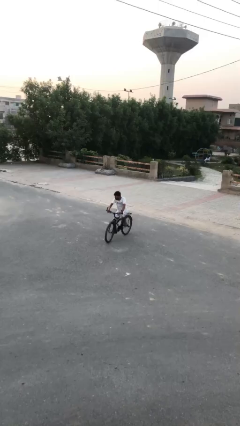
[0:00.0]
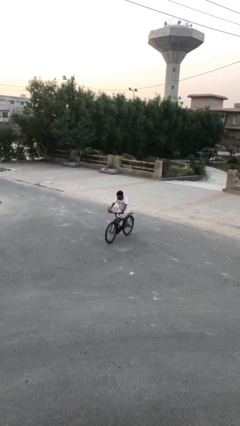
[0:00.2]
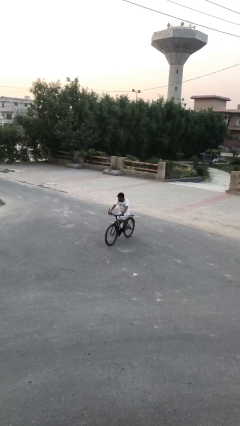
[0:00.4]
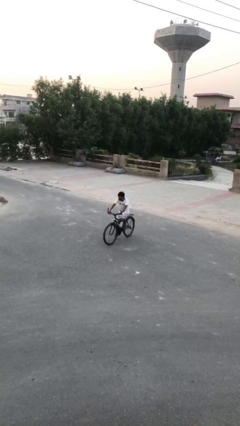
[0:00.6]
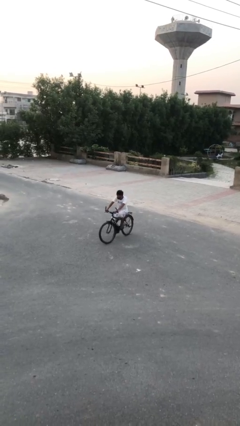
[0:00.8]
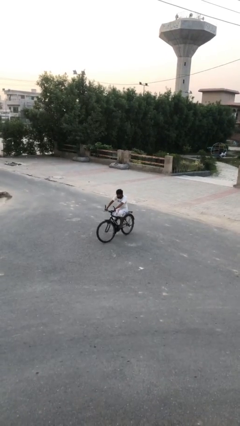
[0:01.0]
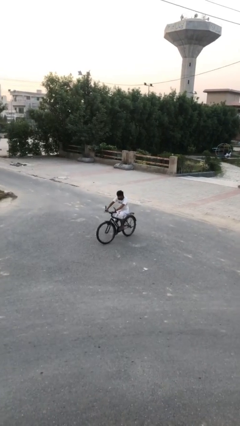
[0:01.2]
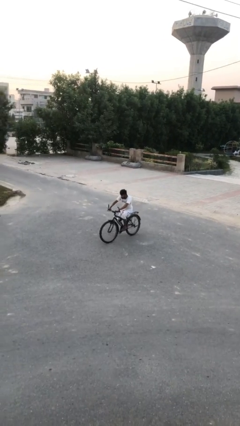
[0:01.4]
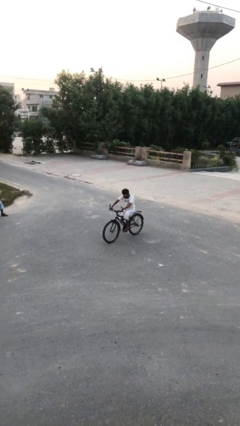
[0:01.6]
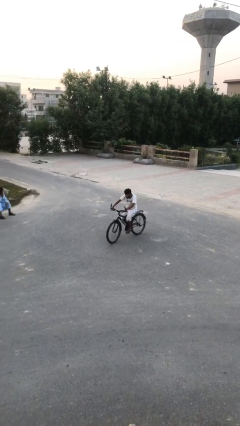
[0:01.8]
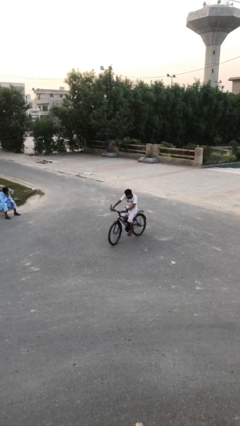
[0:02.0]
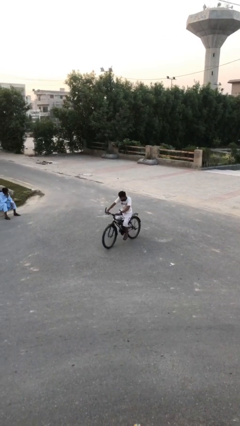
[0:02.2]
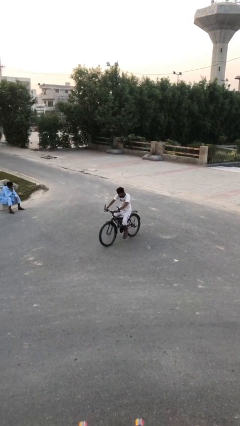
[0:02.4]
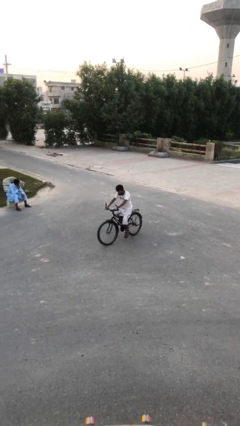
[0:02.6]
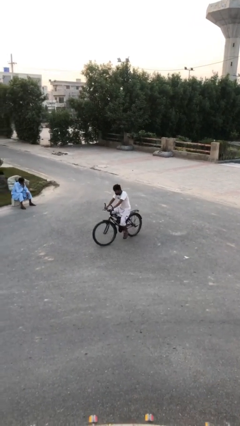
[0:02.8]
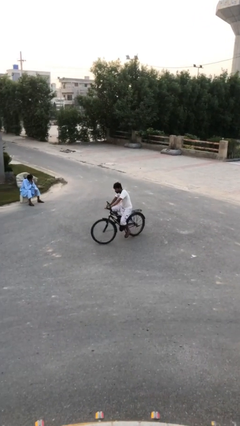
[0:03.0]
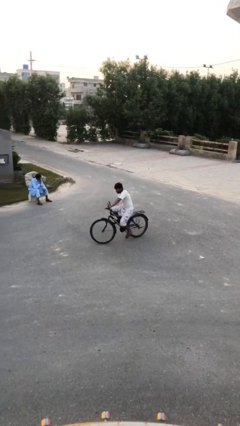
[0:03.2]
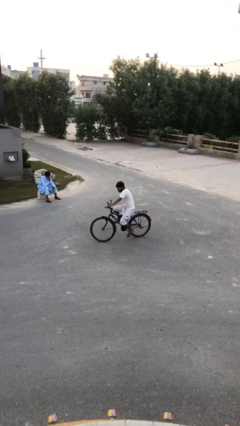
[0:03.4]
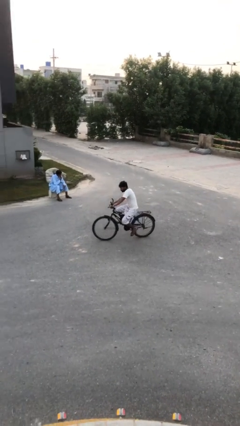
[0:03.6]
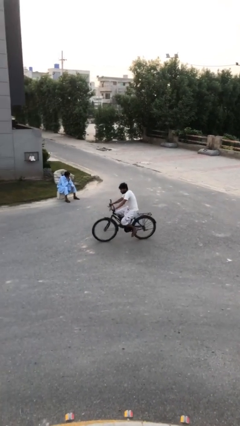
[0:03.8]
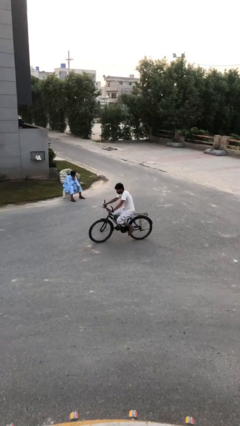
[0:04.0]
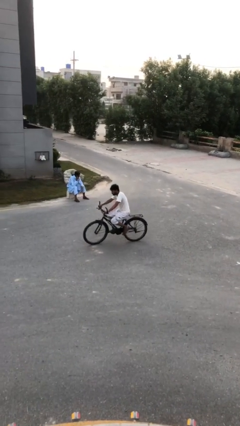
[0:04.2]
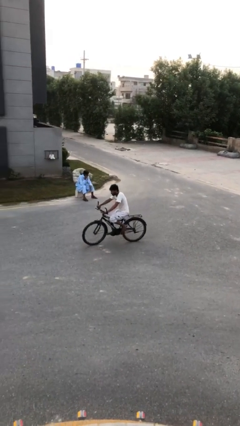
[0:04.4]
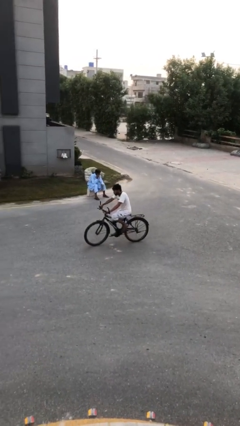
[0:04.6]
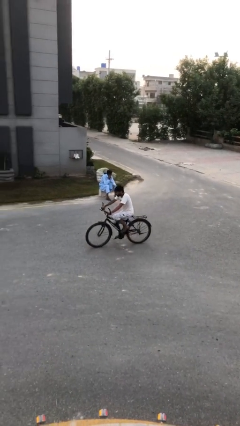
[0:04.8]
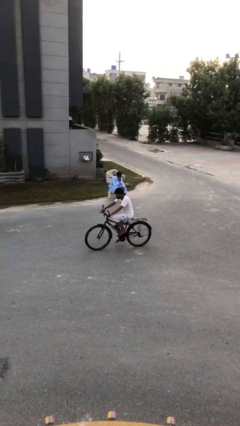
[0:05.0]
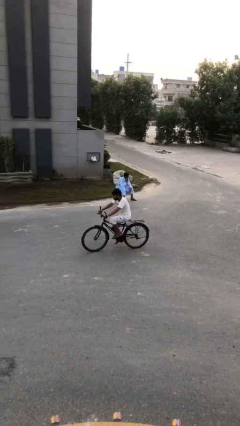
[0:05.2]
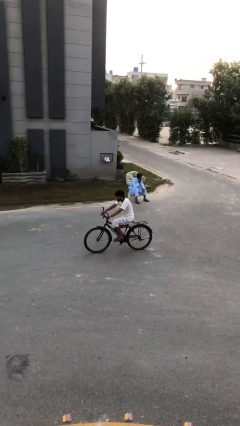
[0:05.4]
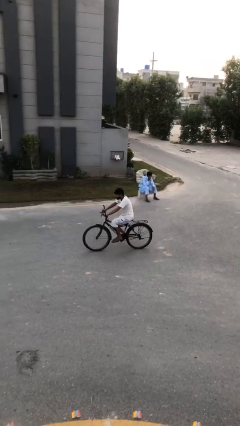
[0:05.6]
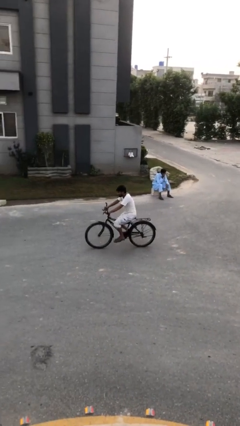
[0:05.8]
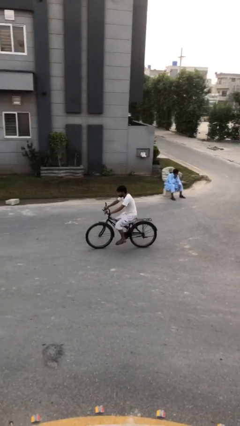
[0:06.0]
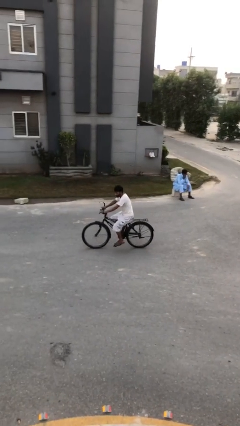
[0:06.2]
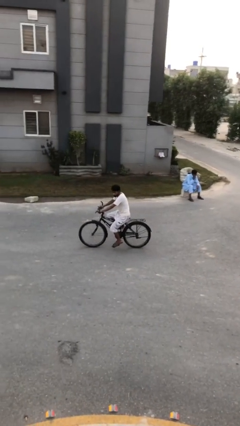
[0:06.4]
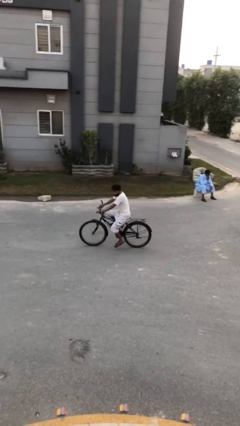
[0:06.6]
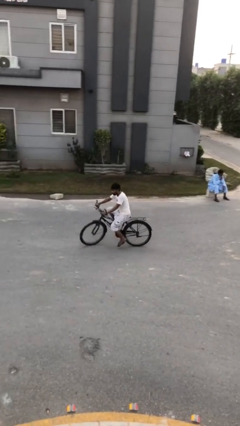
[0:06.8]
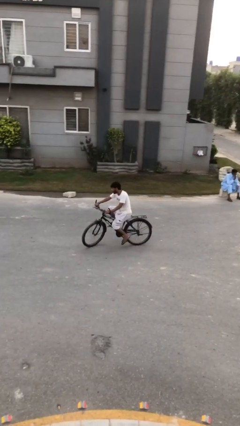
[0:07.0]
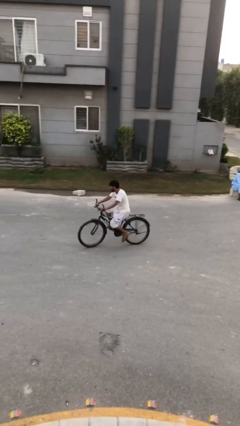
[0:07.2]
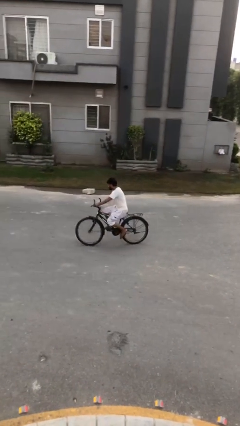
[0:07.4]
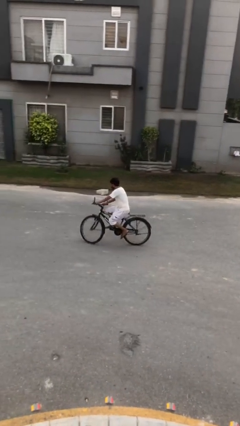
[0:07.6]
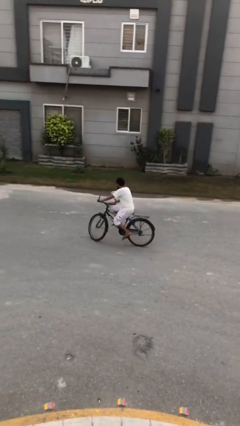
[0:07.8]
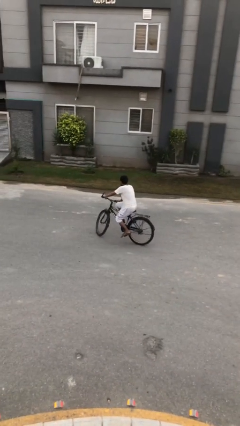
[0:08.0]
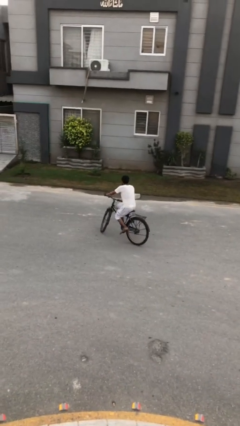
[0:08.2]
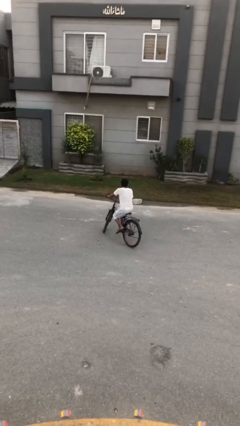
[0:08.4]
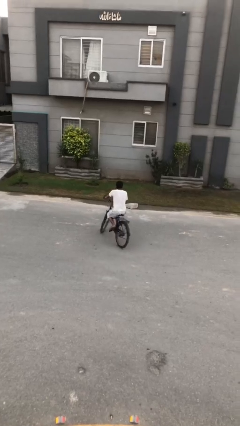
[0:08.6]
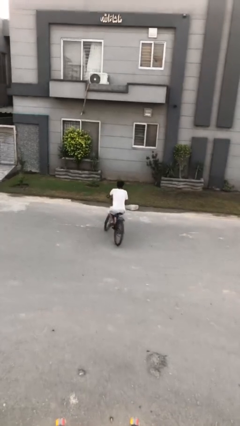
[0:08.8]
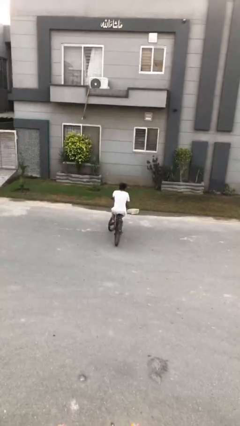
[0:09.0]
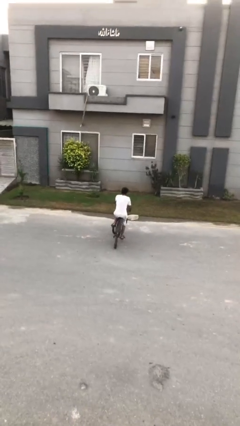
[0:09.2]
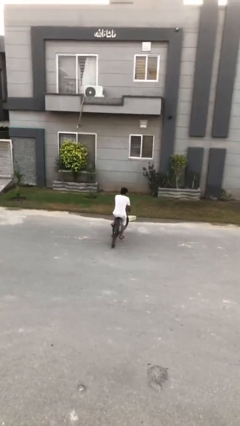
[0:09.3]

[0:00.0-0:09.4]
person rides bicycle

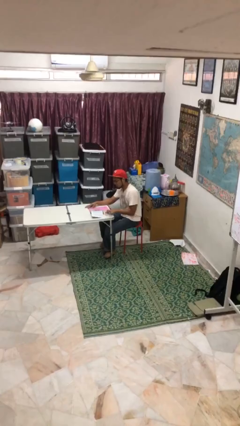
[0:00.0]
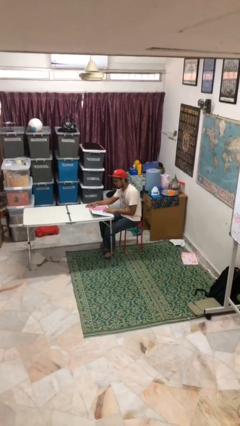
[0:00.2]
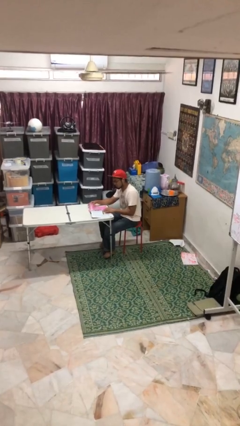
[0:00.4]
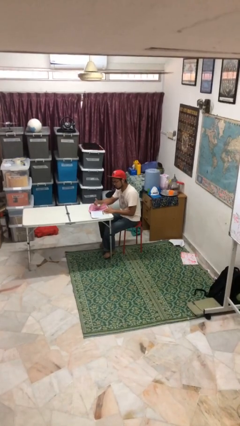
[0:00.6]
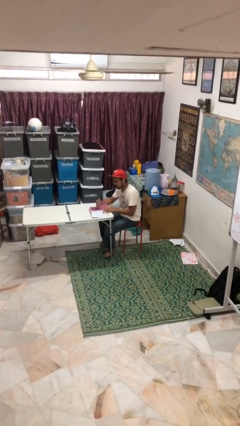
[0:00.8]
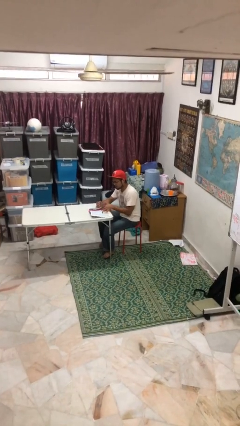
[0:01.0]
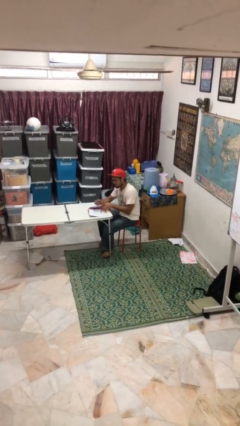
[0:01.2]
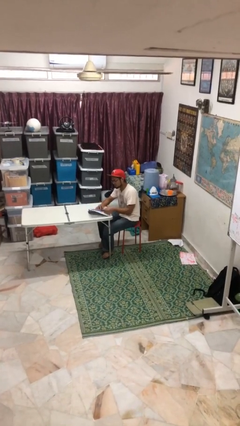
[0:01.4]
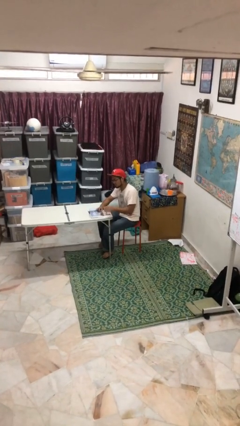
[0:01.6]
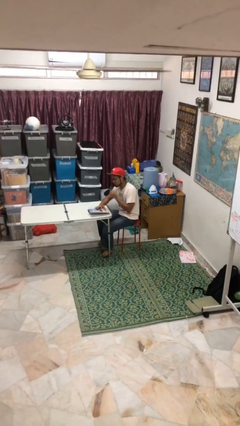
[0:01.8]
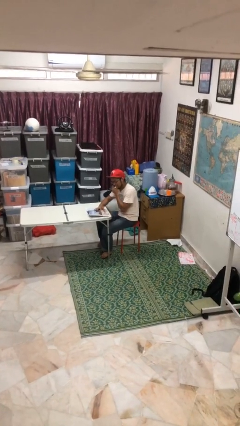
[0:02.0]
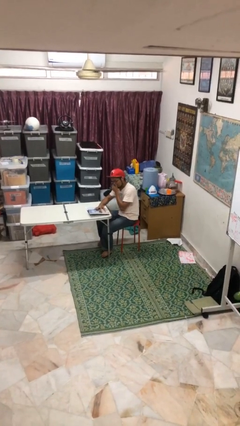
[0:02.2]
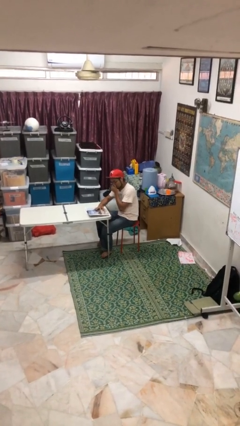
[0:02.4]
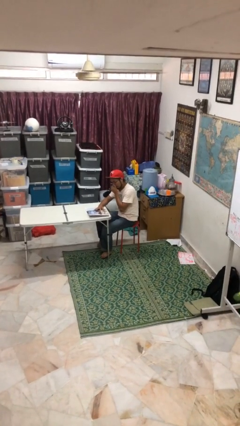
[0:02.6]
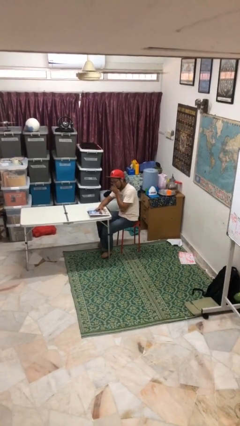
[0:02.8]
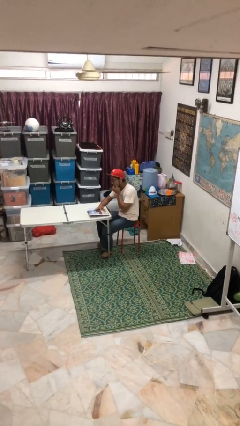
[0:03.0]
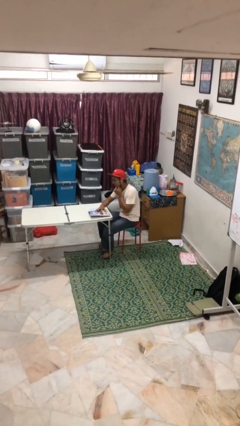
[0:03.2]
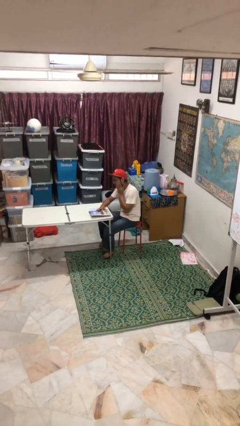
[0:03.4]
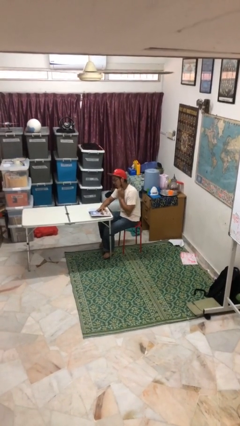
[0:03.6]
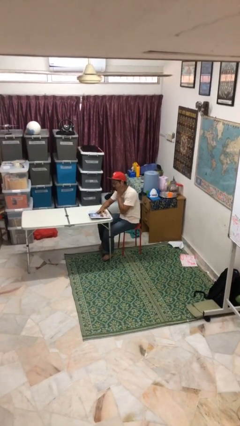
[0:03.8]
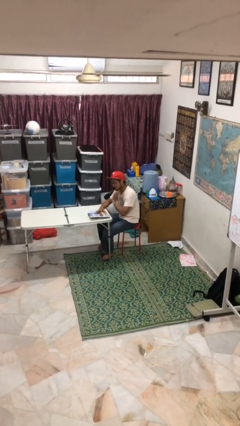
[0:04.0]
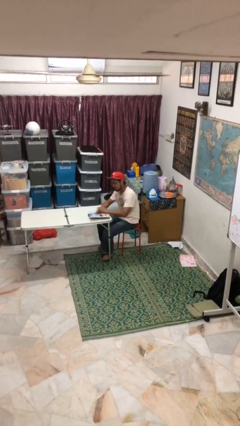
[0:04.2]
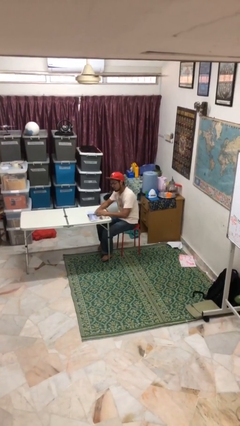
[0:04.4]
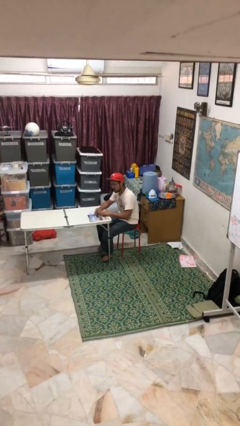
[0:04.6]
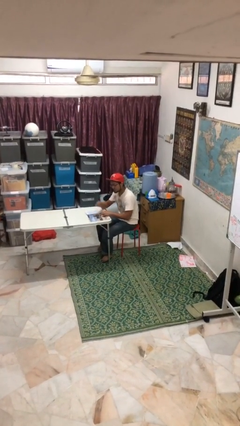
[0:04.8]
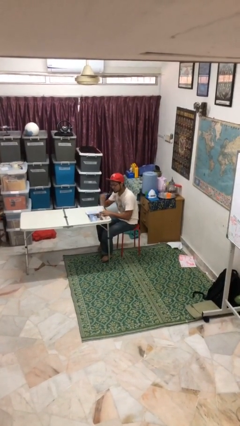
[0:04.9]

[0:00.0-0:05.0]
person reads document

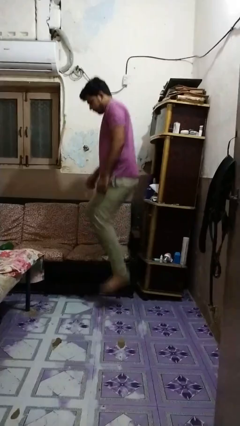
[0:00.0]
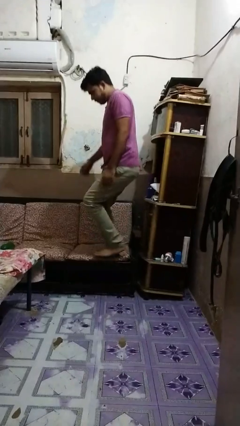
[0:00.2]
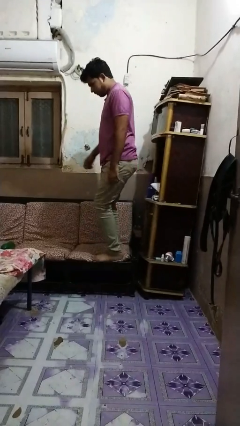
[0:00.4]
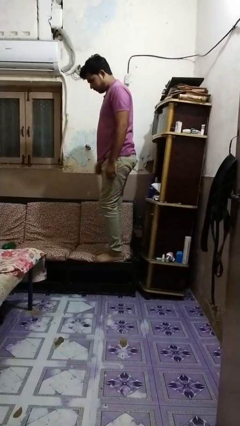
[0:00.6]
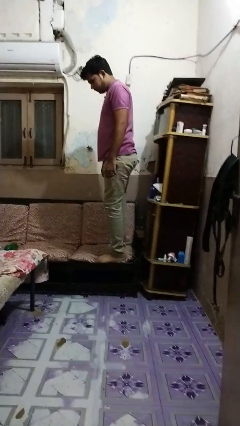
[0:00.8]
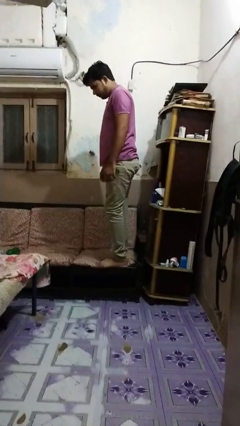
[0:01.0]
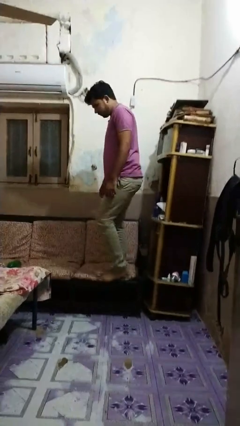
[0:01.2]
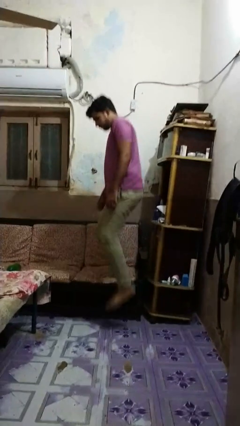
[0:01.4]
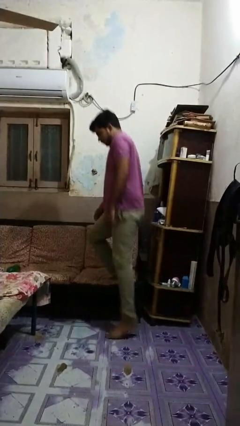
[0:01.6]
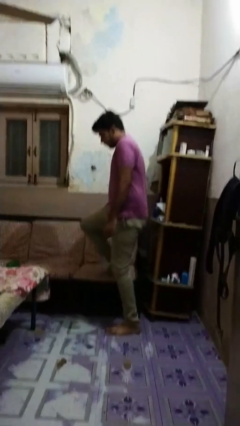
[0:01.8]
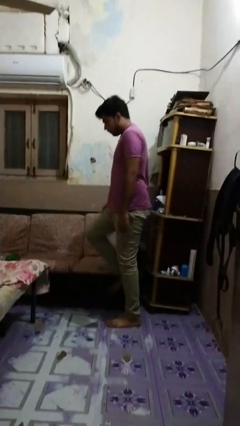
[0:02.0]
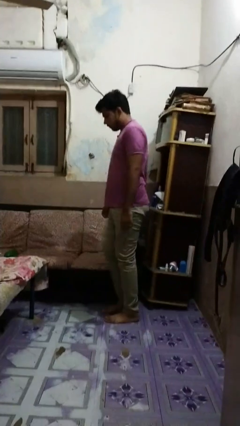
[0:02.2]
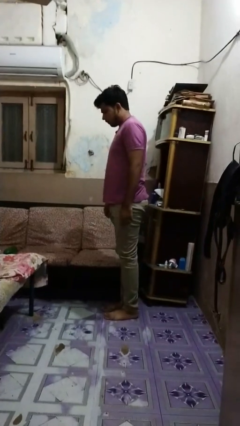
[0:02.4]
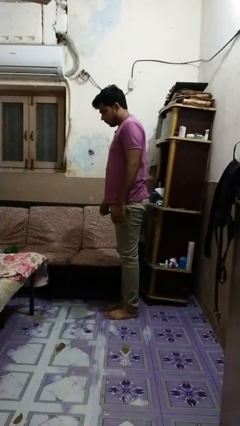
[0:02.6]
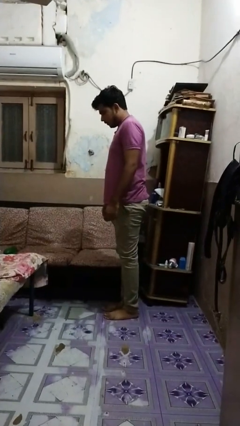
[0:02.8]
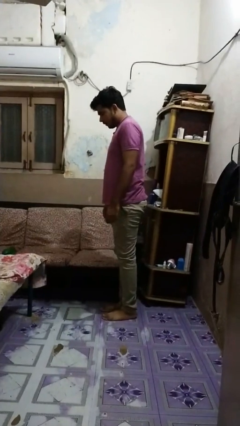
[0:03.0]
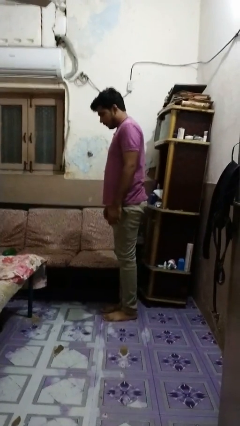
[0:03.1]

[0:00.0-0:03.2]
person climbs on couch

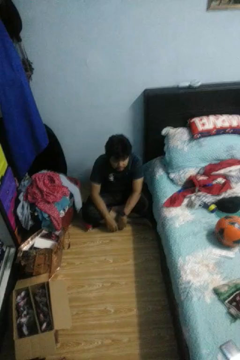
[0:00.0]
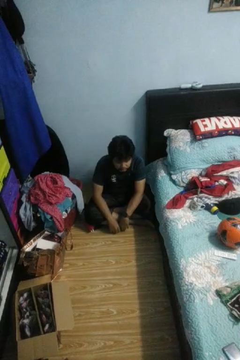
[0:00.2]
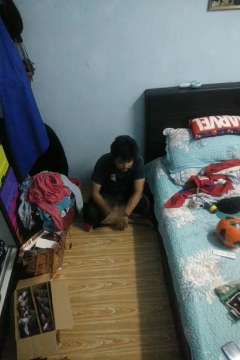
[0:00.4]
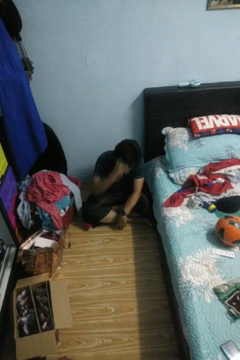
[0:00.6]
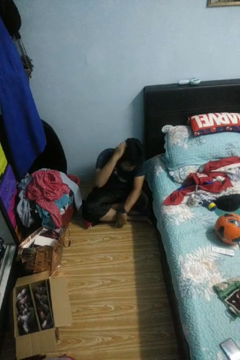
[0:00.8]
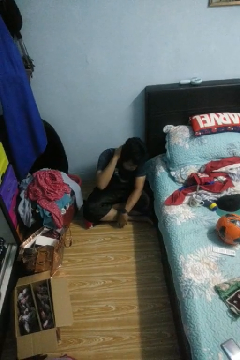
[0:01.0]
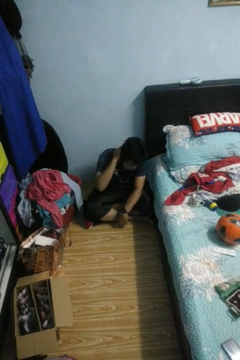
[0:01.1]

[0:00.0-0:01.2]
person strokes hair
